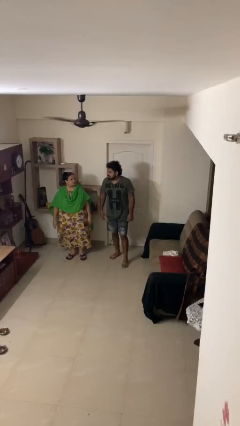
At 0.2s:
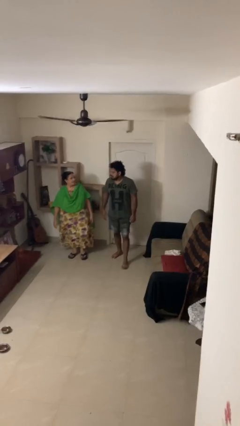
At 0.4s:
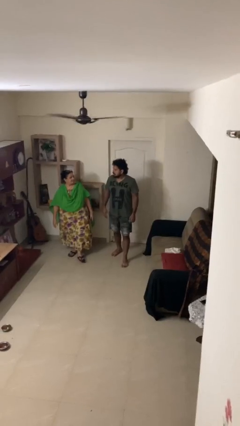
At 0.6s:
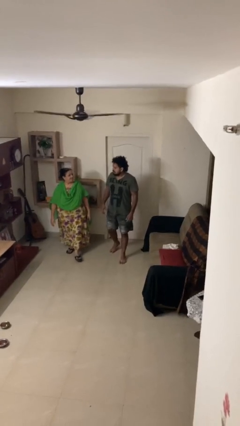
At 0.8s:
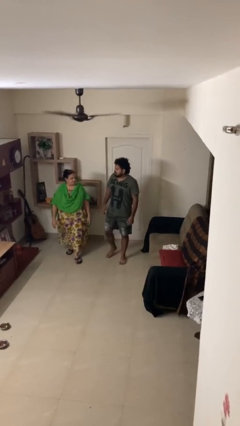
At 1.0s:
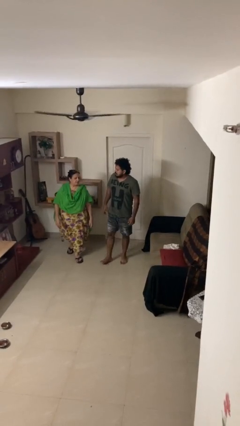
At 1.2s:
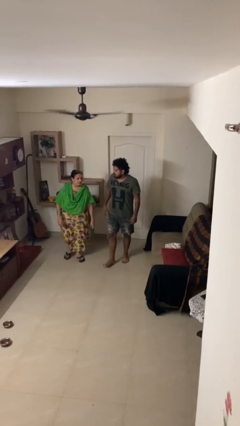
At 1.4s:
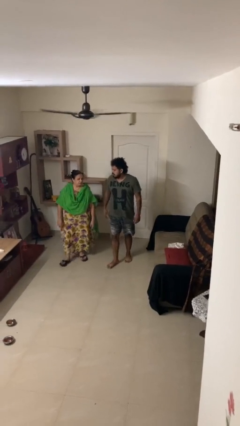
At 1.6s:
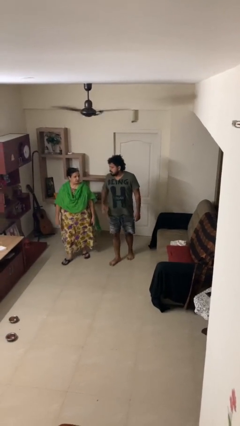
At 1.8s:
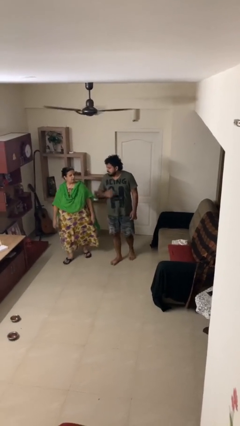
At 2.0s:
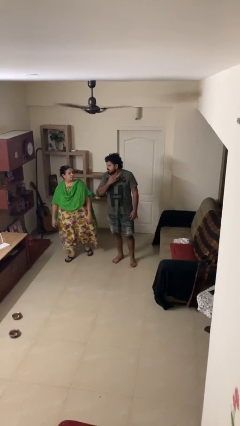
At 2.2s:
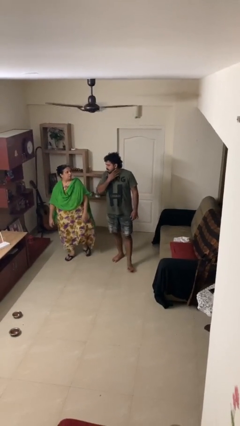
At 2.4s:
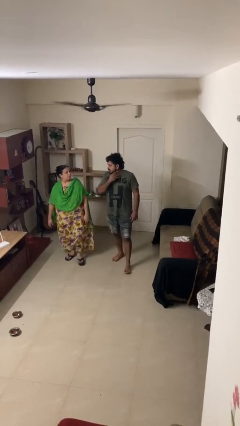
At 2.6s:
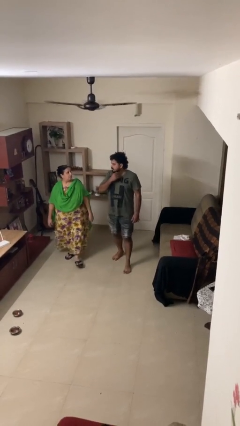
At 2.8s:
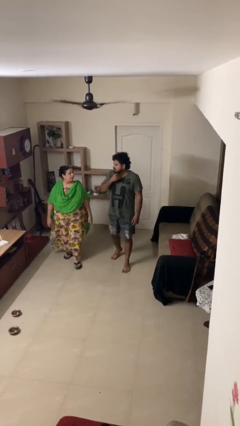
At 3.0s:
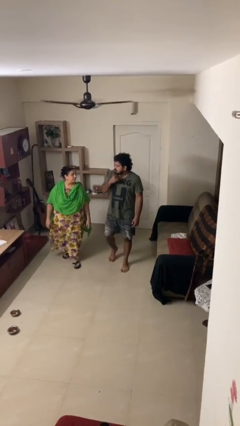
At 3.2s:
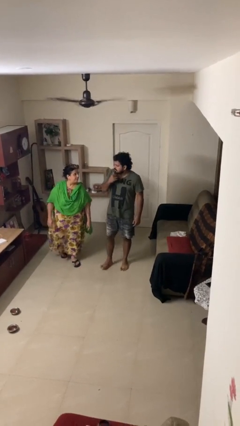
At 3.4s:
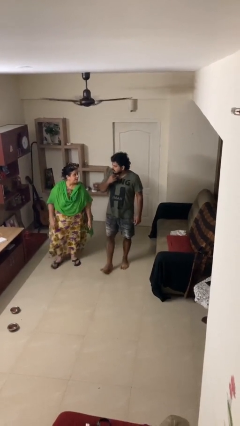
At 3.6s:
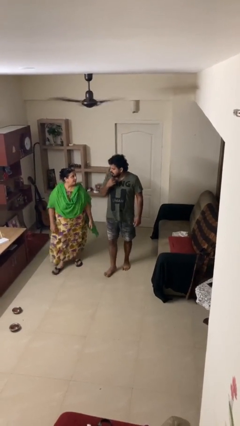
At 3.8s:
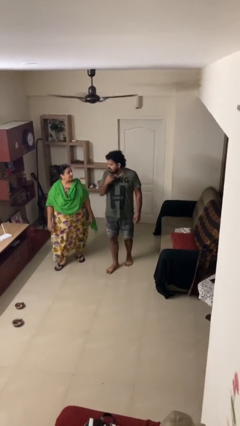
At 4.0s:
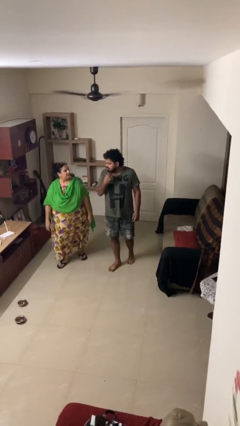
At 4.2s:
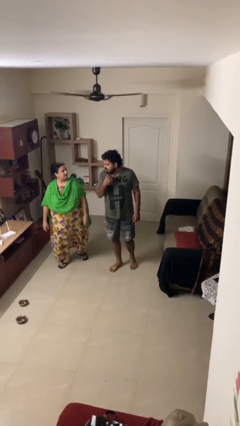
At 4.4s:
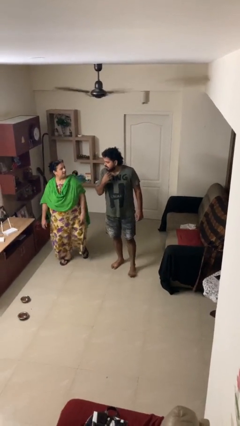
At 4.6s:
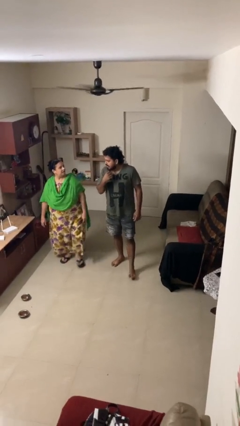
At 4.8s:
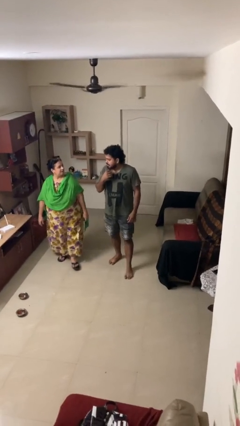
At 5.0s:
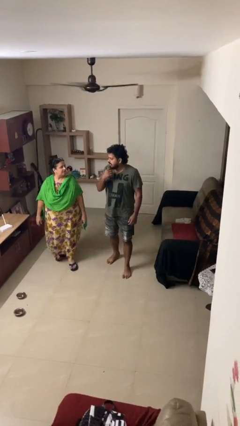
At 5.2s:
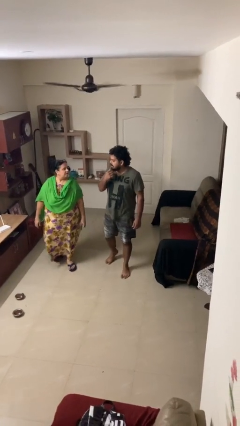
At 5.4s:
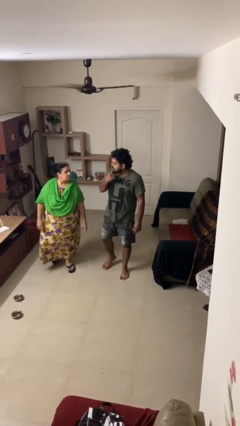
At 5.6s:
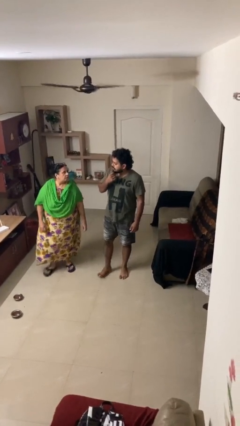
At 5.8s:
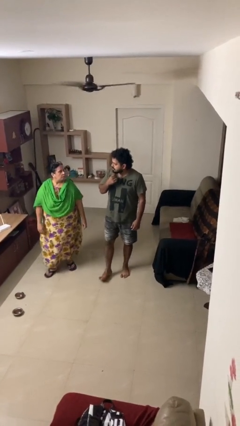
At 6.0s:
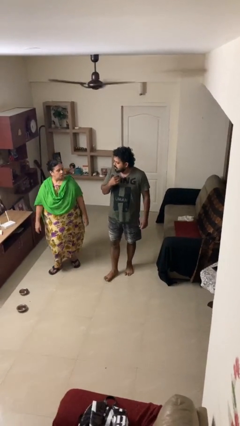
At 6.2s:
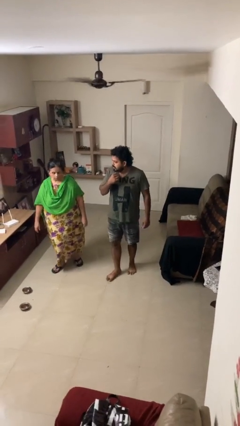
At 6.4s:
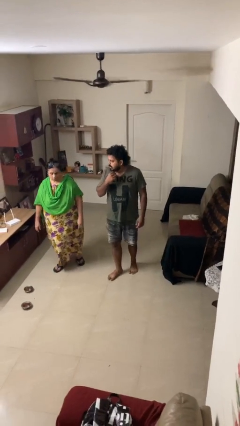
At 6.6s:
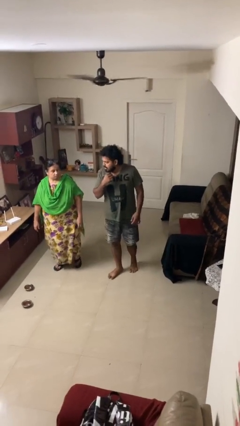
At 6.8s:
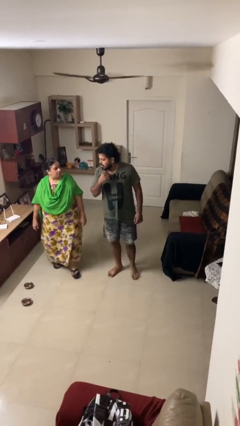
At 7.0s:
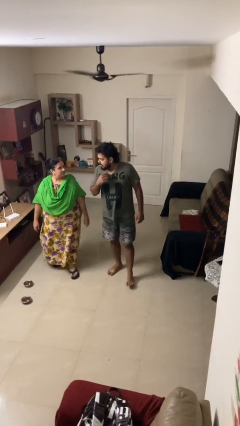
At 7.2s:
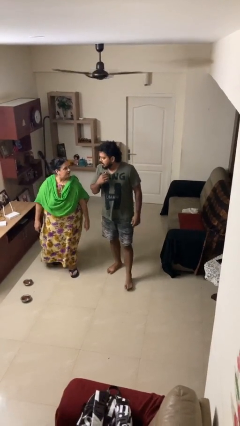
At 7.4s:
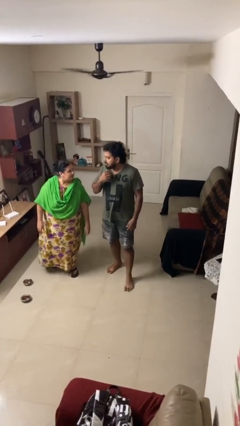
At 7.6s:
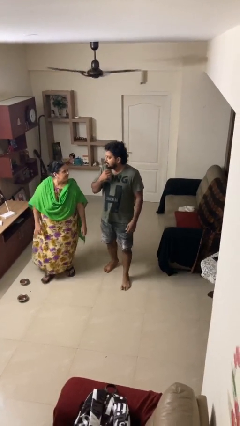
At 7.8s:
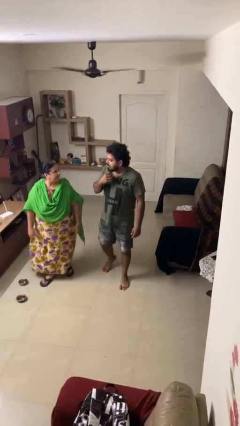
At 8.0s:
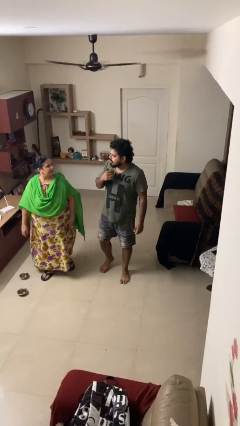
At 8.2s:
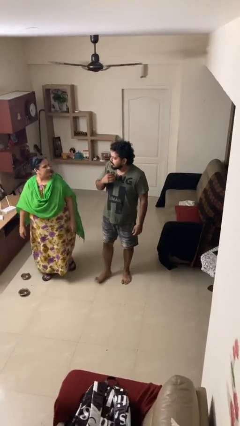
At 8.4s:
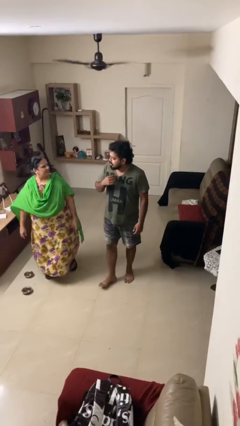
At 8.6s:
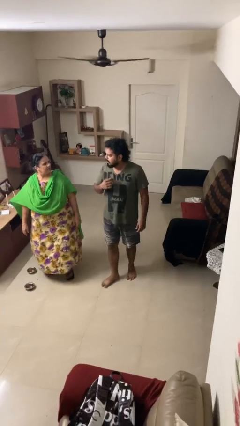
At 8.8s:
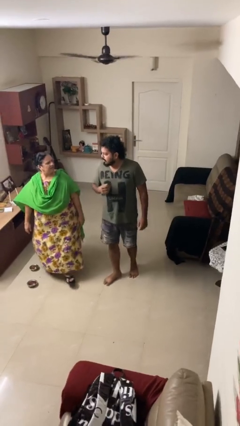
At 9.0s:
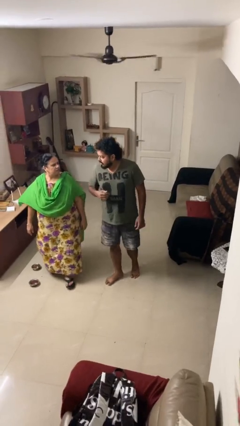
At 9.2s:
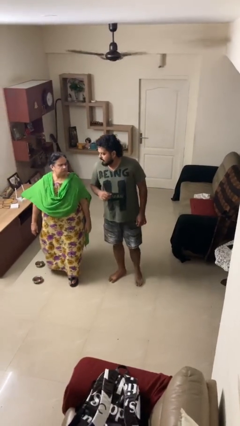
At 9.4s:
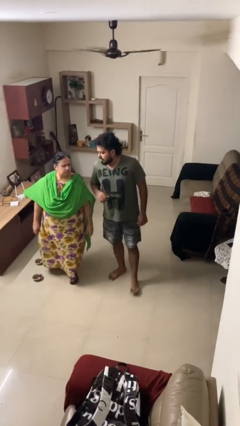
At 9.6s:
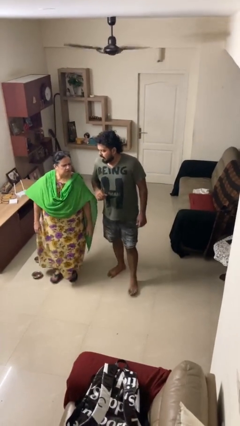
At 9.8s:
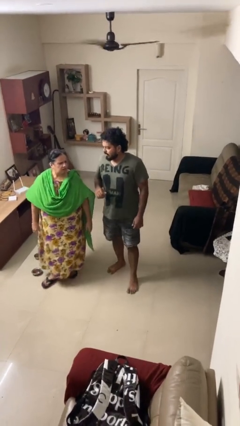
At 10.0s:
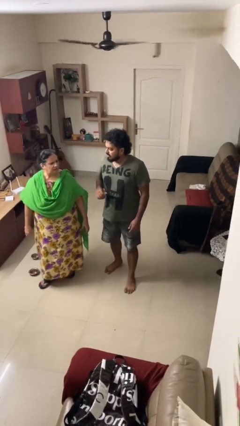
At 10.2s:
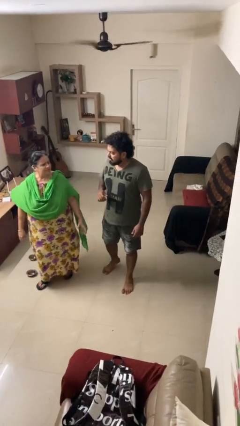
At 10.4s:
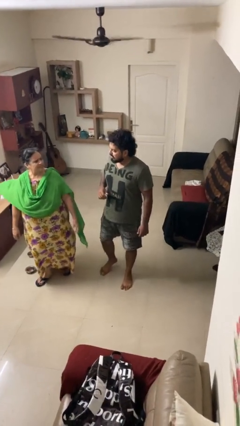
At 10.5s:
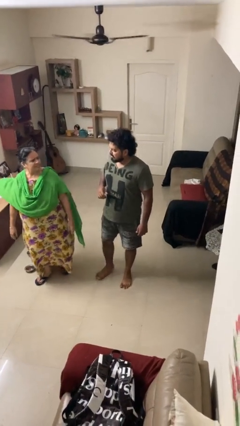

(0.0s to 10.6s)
person talks to person

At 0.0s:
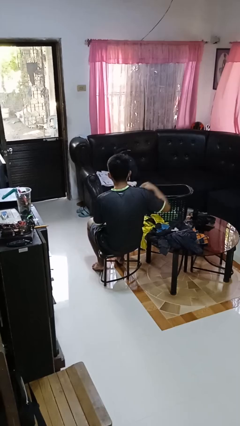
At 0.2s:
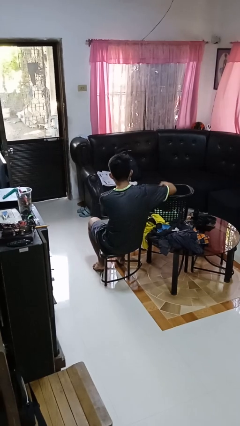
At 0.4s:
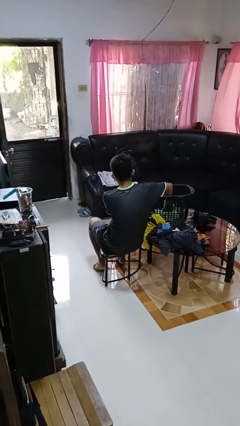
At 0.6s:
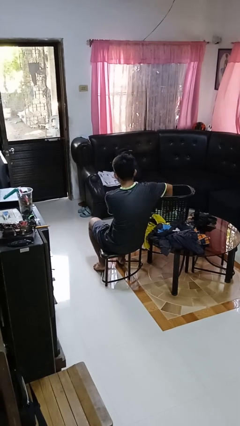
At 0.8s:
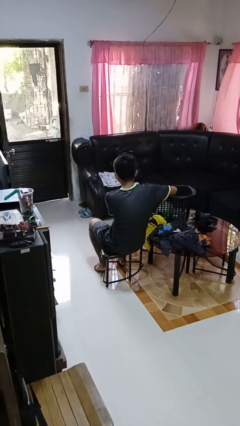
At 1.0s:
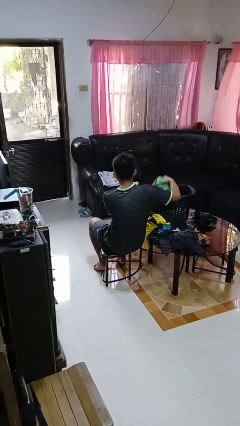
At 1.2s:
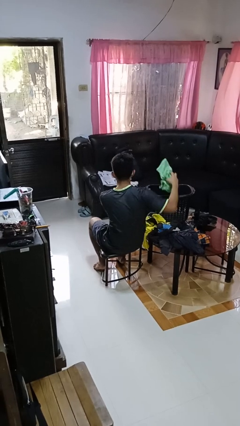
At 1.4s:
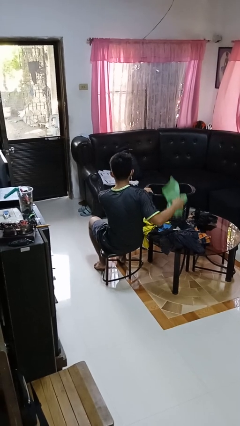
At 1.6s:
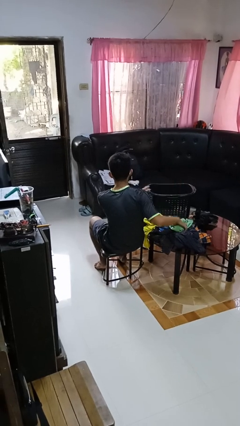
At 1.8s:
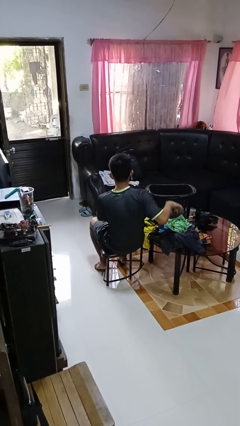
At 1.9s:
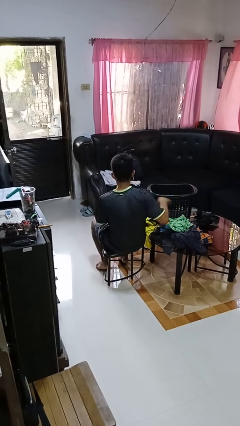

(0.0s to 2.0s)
person takes object from basket

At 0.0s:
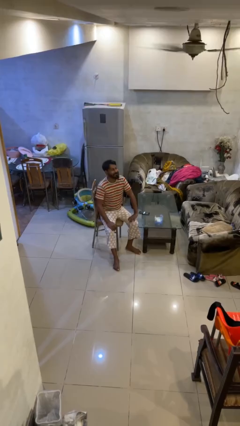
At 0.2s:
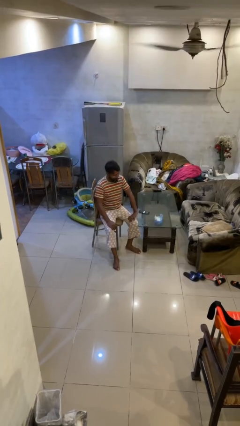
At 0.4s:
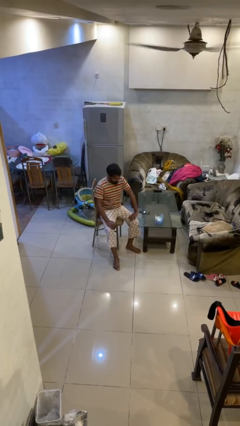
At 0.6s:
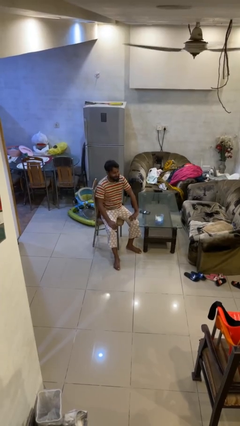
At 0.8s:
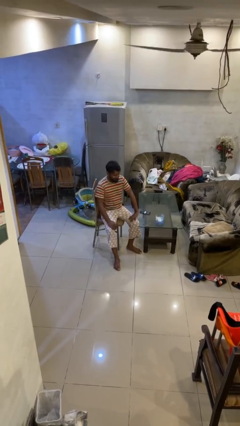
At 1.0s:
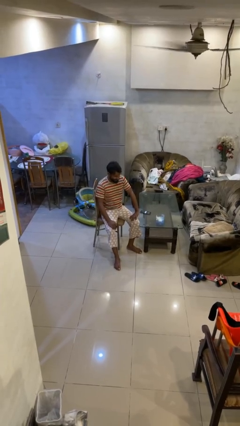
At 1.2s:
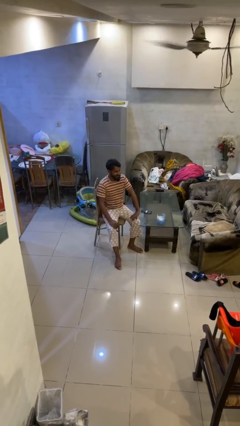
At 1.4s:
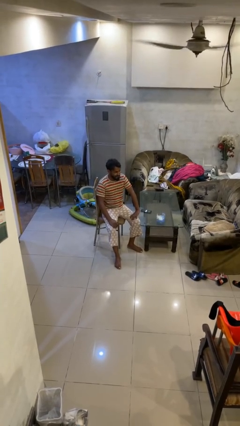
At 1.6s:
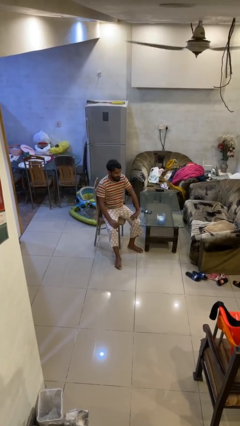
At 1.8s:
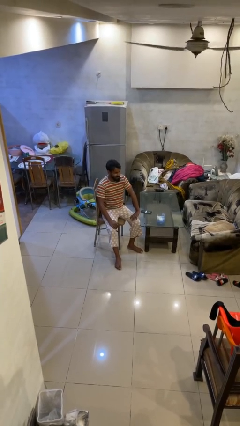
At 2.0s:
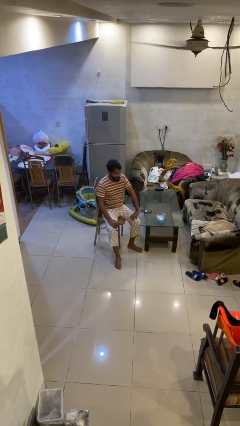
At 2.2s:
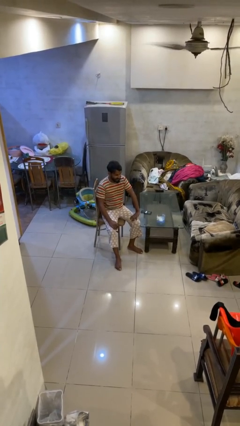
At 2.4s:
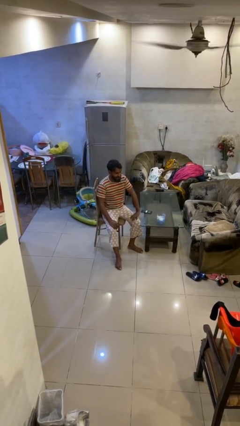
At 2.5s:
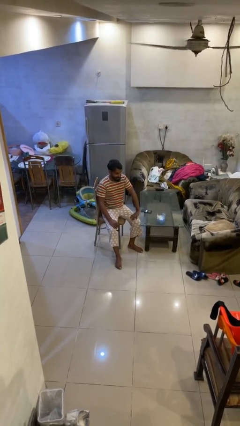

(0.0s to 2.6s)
person nods head

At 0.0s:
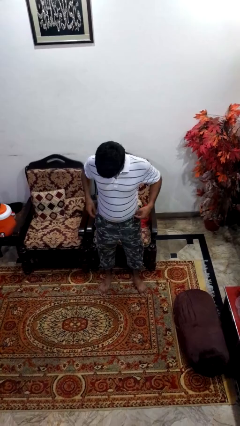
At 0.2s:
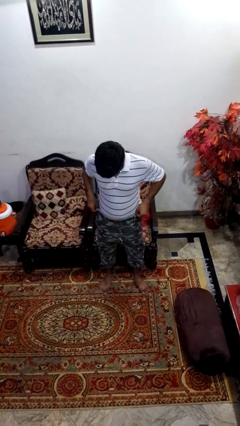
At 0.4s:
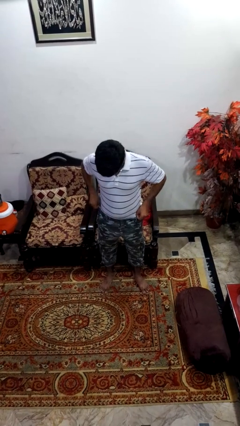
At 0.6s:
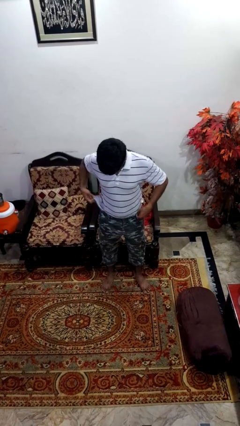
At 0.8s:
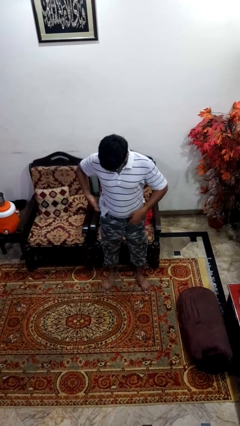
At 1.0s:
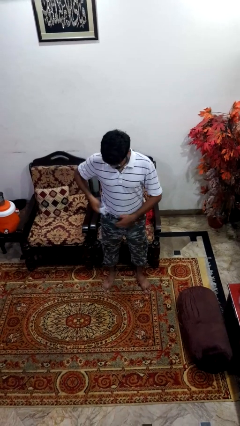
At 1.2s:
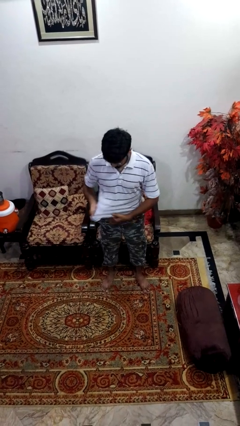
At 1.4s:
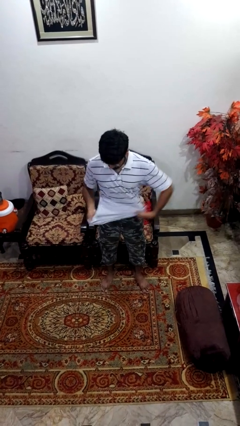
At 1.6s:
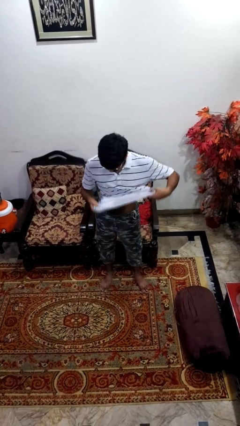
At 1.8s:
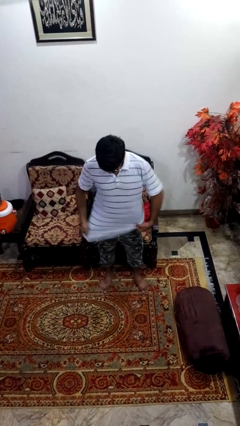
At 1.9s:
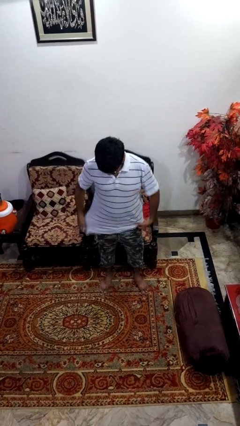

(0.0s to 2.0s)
person untucks shirt

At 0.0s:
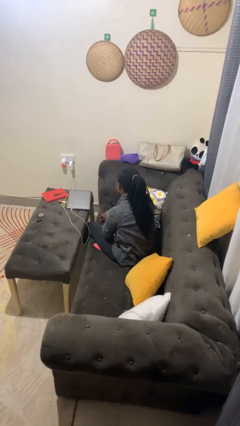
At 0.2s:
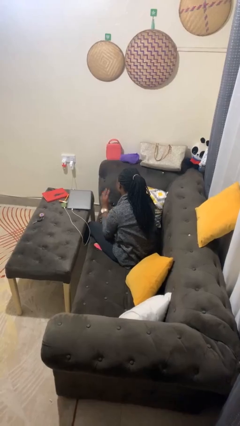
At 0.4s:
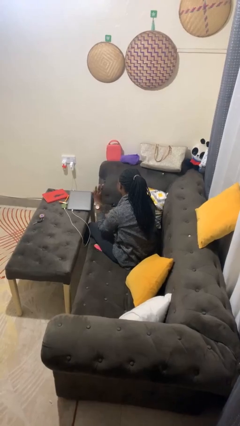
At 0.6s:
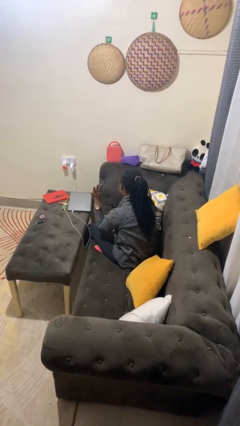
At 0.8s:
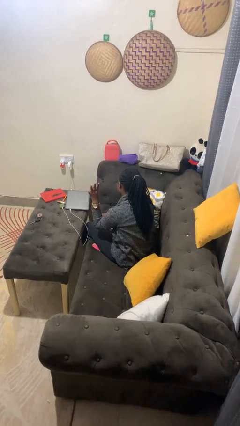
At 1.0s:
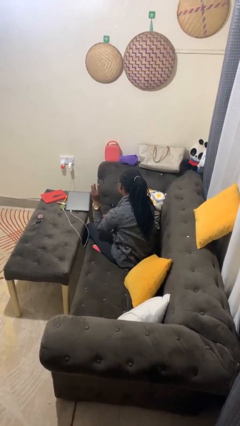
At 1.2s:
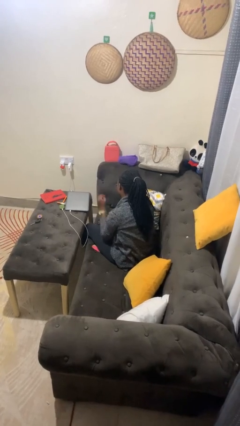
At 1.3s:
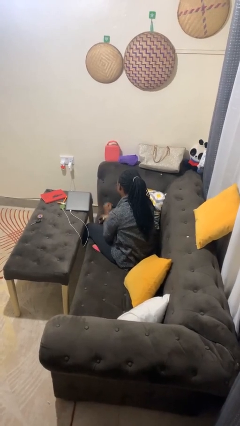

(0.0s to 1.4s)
person gestures number three
